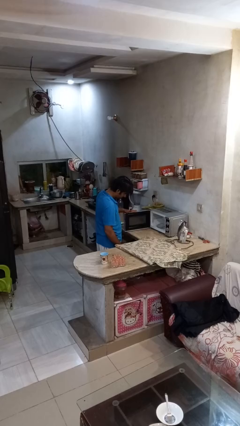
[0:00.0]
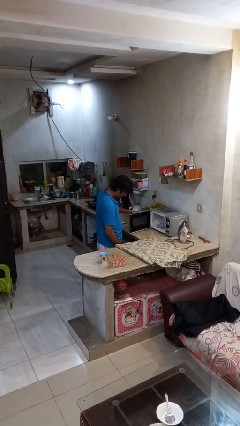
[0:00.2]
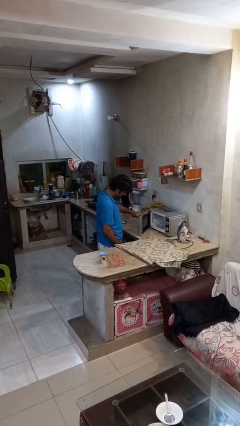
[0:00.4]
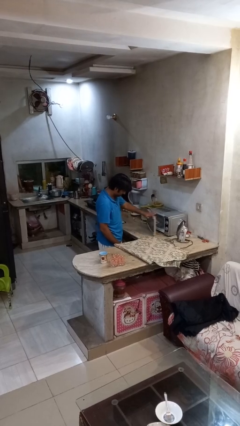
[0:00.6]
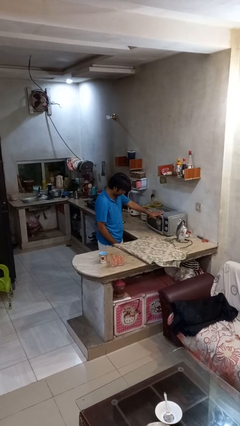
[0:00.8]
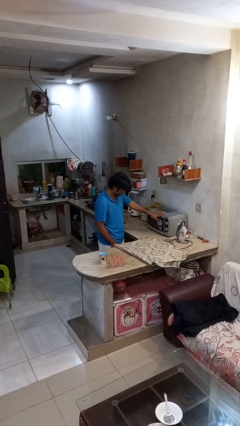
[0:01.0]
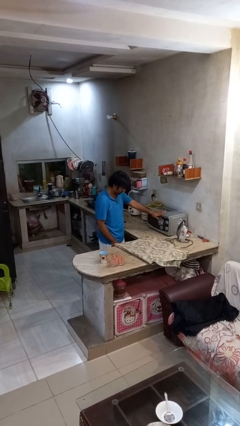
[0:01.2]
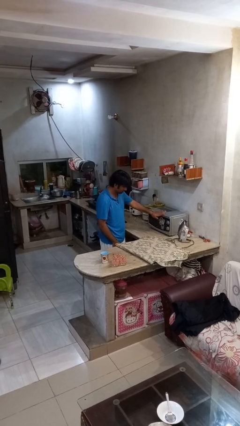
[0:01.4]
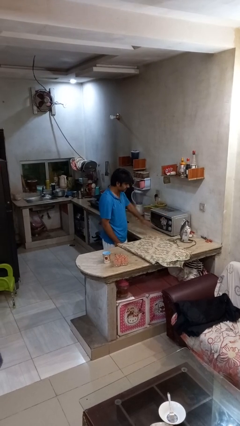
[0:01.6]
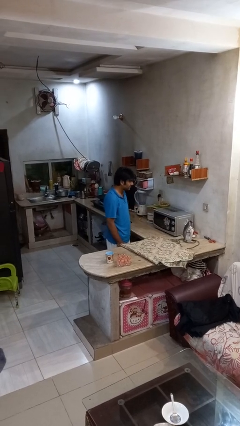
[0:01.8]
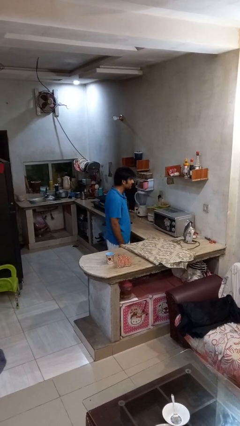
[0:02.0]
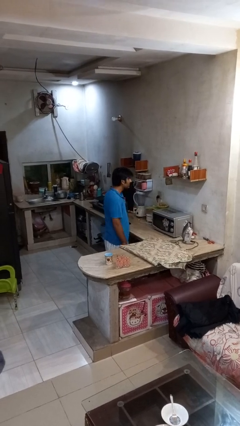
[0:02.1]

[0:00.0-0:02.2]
person closes microwave

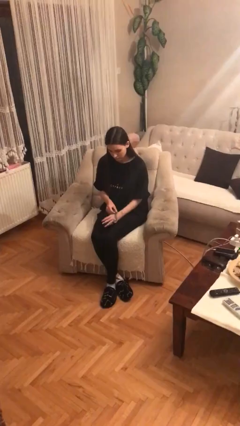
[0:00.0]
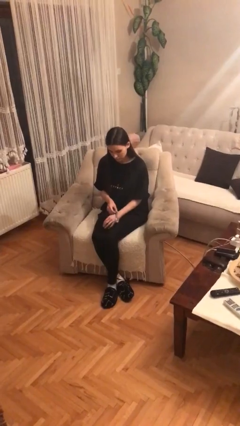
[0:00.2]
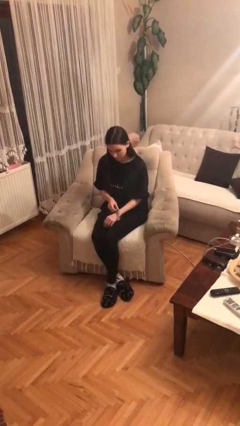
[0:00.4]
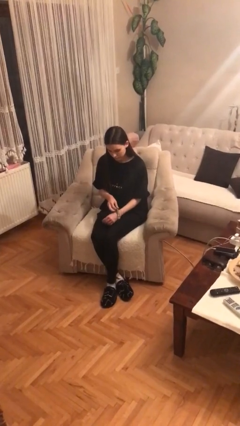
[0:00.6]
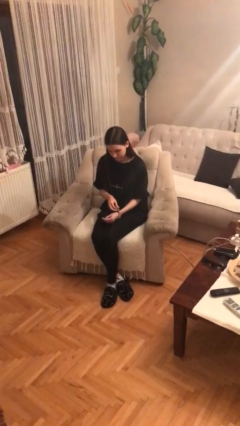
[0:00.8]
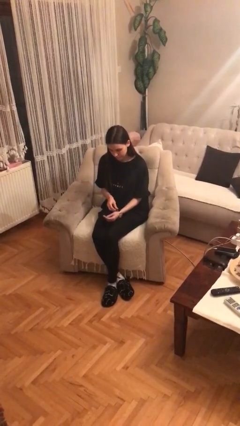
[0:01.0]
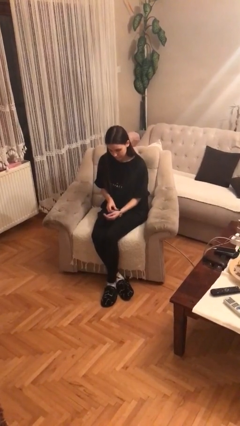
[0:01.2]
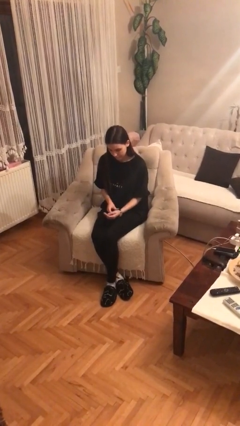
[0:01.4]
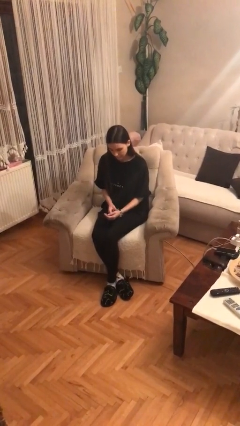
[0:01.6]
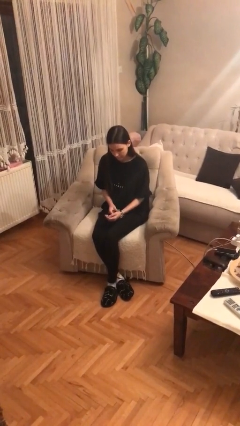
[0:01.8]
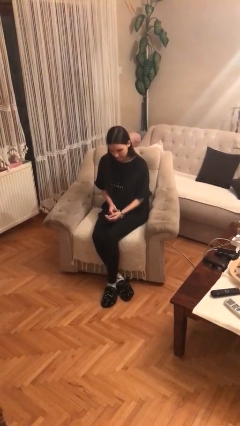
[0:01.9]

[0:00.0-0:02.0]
person puts on wristwatch

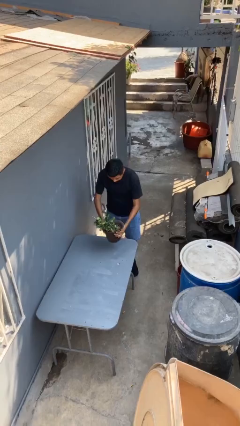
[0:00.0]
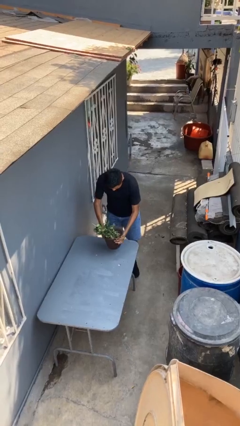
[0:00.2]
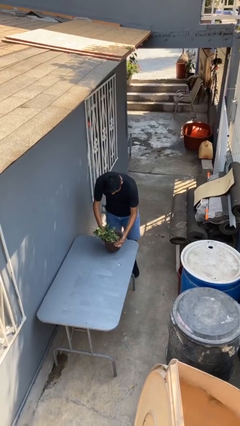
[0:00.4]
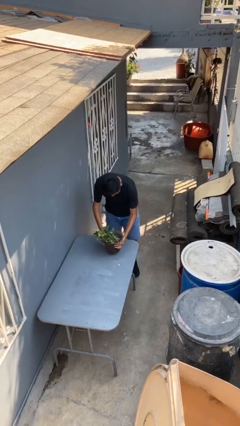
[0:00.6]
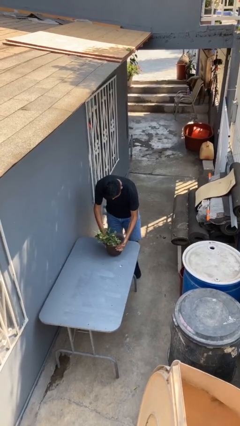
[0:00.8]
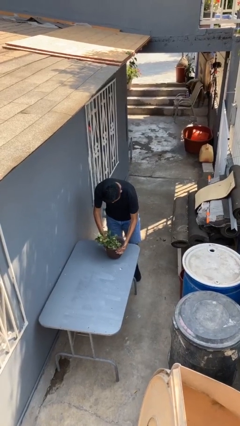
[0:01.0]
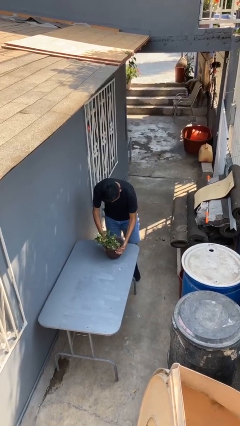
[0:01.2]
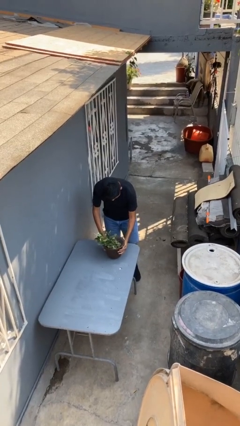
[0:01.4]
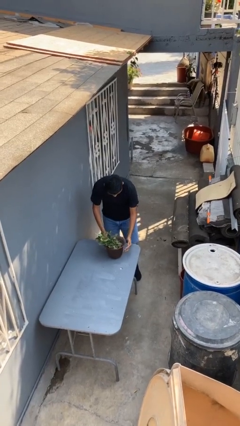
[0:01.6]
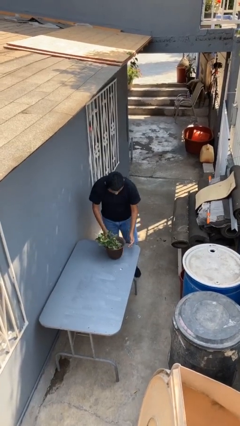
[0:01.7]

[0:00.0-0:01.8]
person puts down object on table

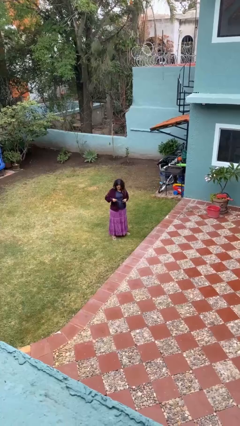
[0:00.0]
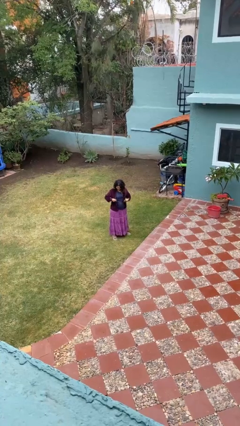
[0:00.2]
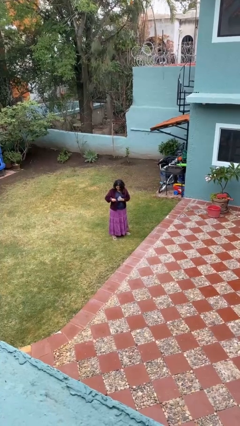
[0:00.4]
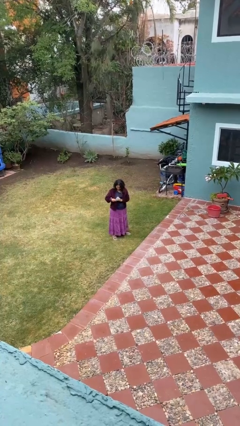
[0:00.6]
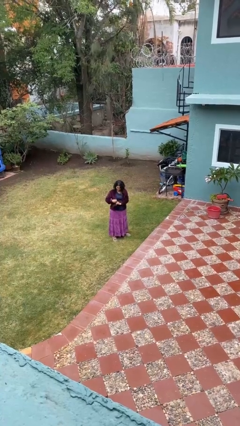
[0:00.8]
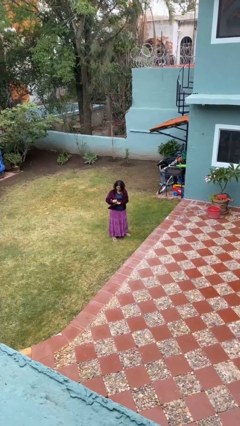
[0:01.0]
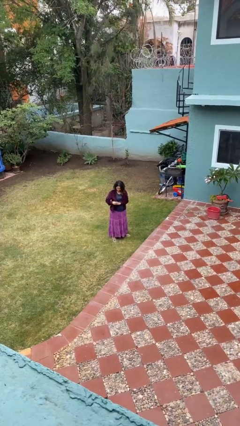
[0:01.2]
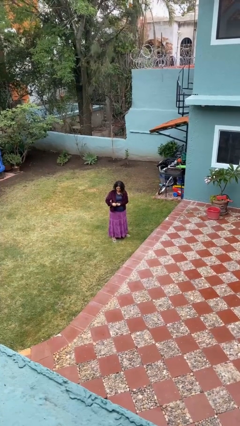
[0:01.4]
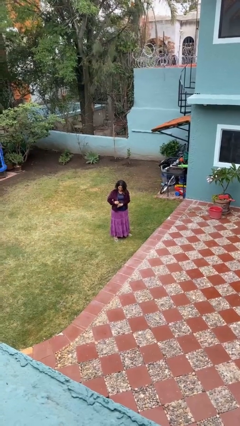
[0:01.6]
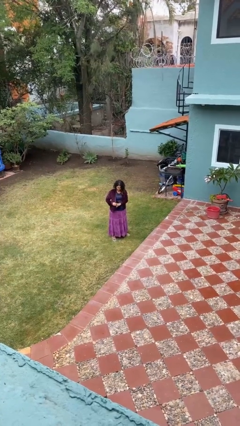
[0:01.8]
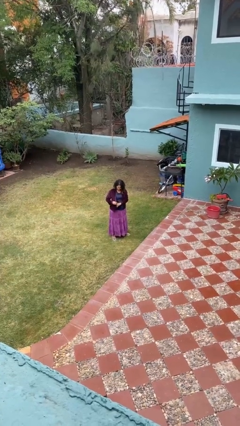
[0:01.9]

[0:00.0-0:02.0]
person puts phone into pocket

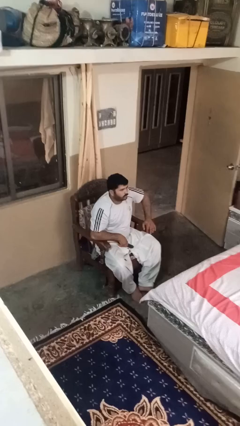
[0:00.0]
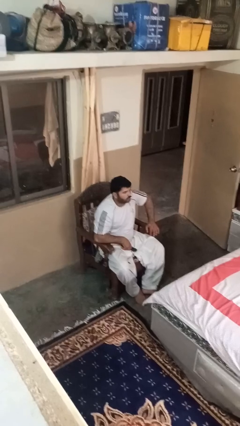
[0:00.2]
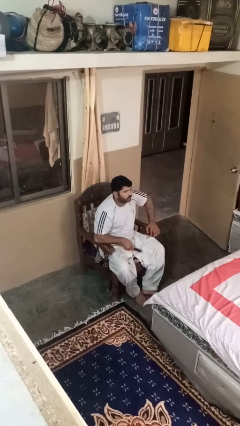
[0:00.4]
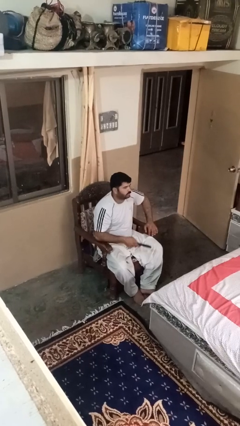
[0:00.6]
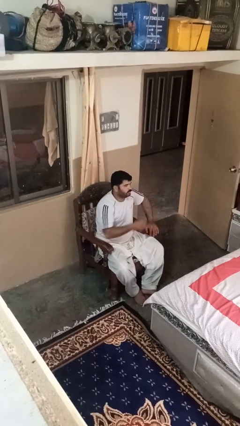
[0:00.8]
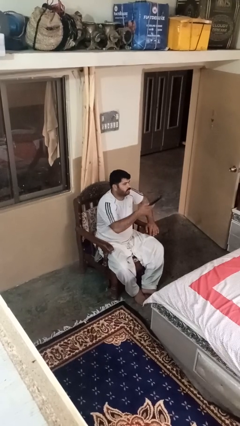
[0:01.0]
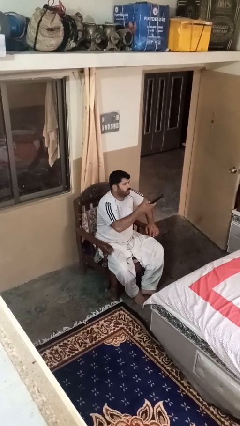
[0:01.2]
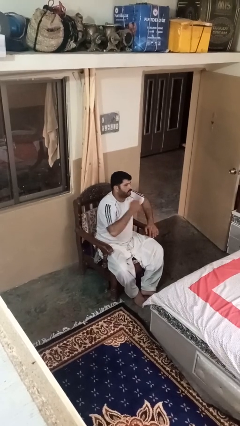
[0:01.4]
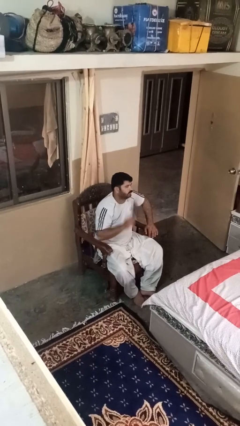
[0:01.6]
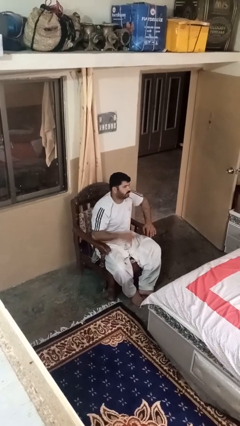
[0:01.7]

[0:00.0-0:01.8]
person uses television remote

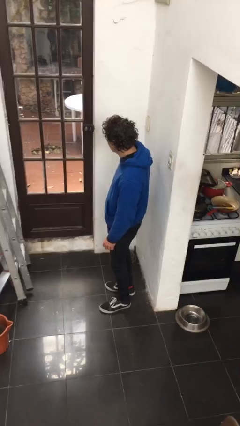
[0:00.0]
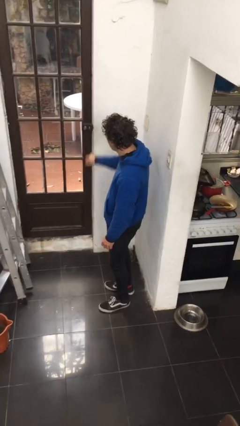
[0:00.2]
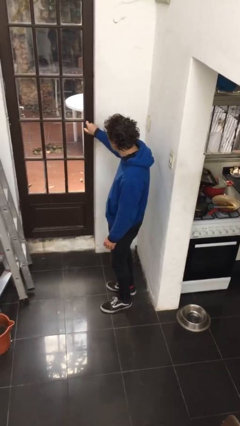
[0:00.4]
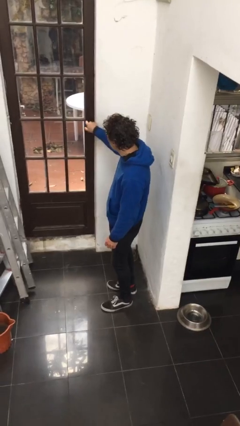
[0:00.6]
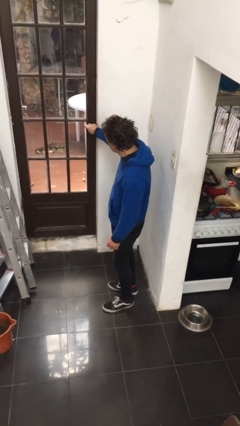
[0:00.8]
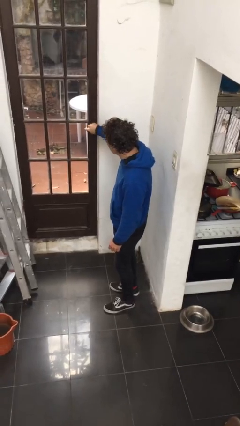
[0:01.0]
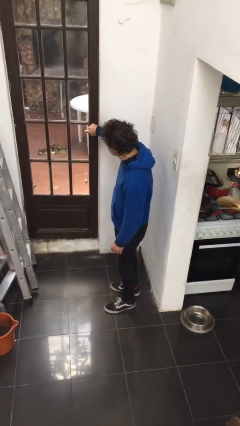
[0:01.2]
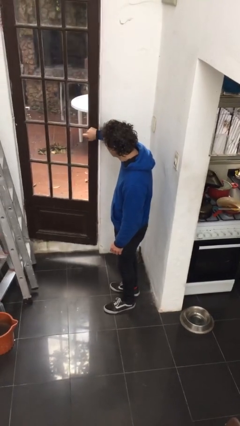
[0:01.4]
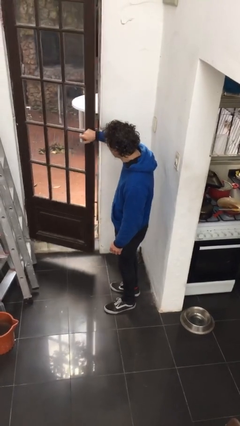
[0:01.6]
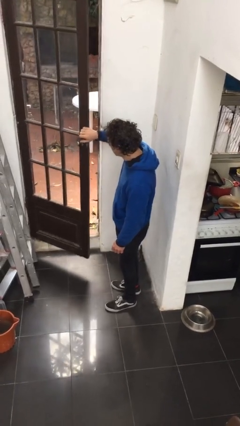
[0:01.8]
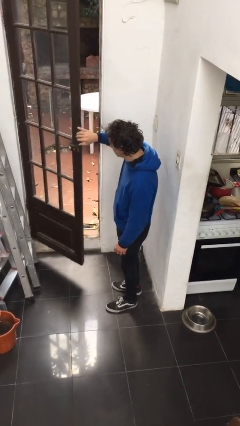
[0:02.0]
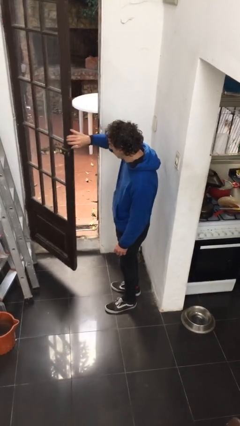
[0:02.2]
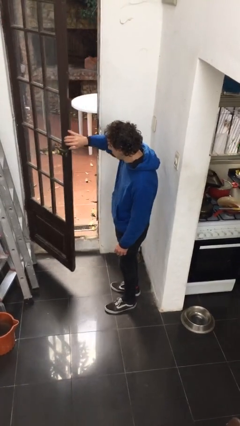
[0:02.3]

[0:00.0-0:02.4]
person opens facility door

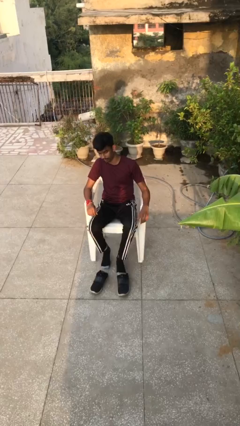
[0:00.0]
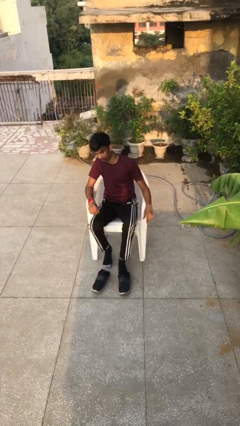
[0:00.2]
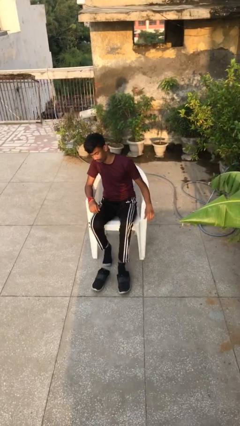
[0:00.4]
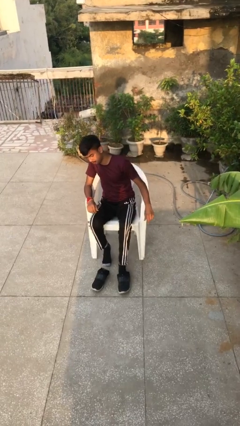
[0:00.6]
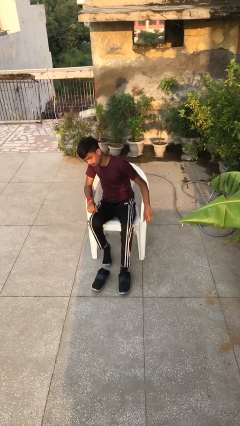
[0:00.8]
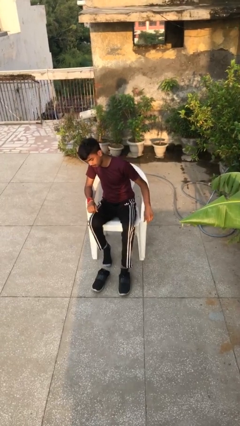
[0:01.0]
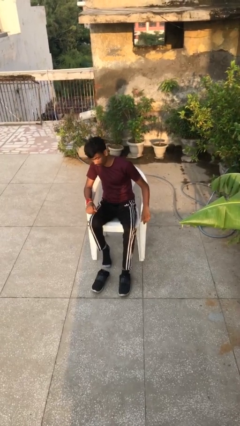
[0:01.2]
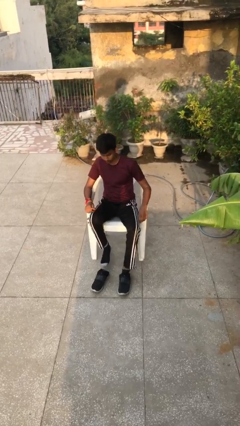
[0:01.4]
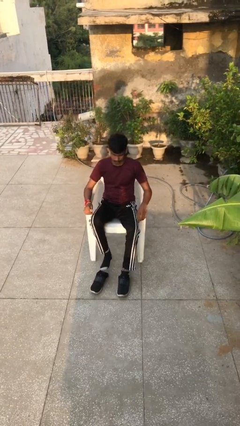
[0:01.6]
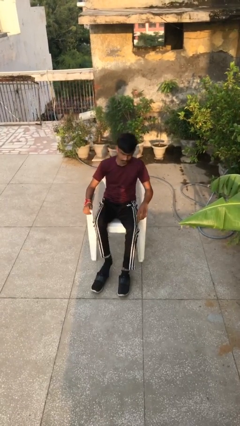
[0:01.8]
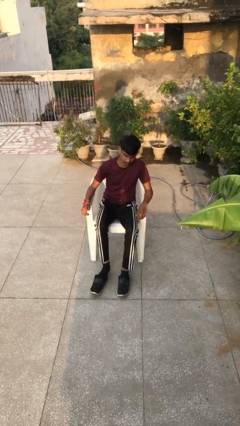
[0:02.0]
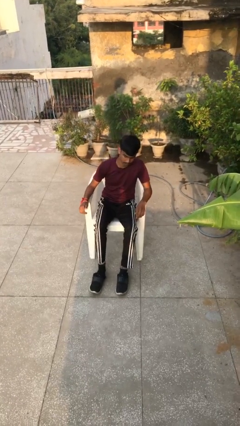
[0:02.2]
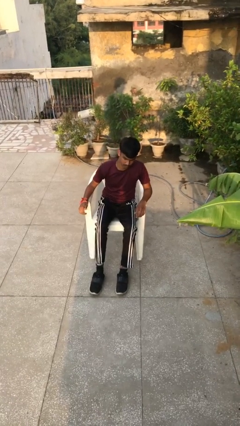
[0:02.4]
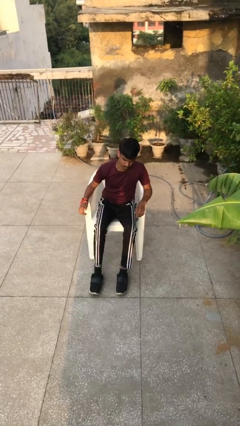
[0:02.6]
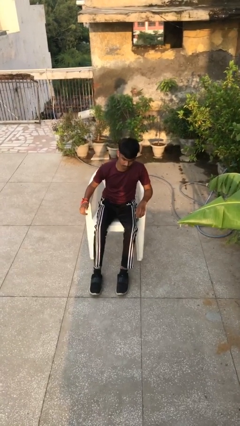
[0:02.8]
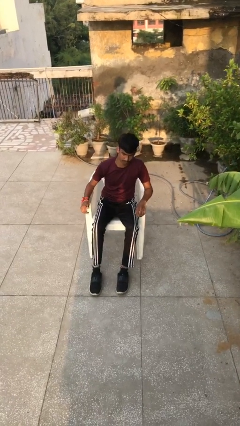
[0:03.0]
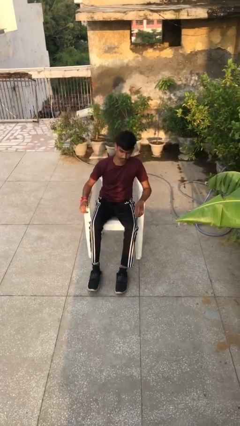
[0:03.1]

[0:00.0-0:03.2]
person puts on shoes

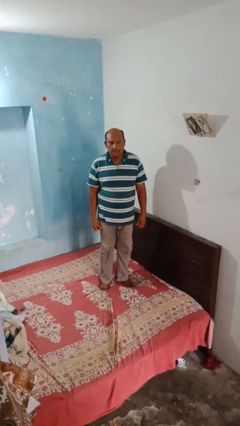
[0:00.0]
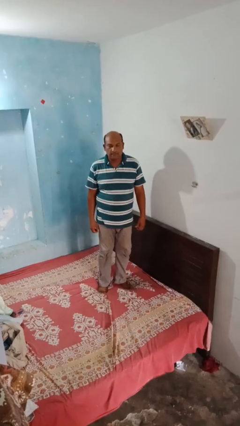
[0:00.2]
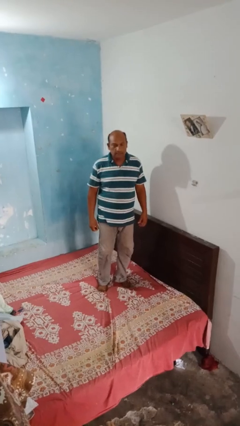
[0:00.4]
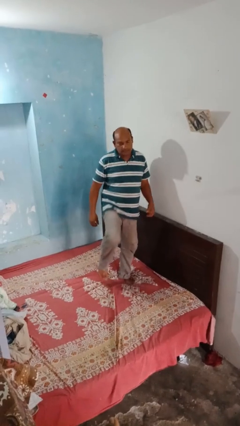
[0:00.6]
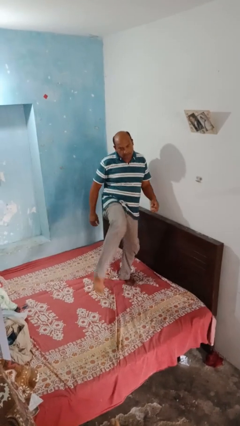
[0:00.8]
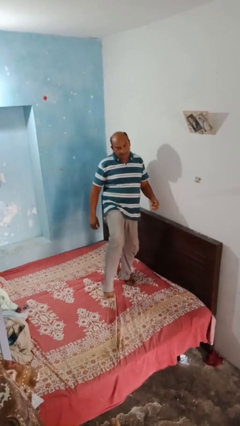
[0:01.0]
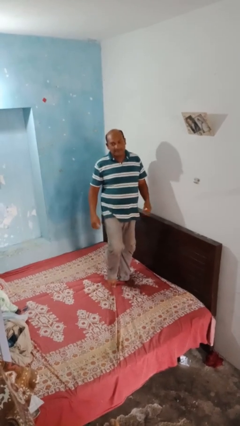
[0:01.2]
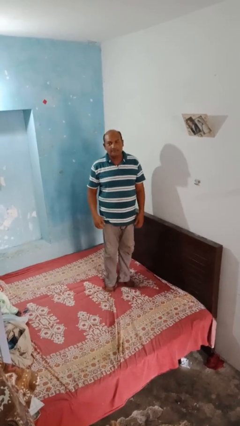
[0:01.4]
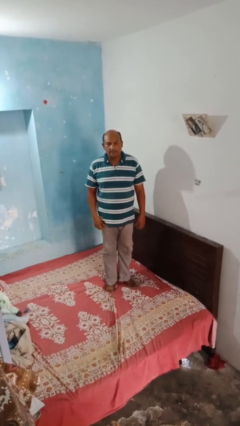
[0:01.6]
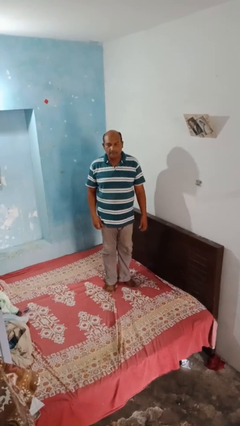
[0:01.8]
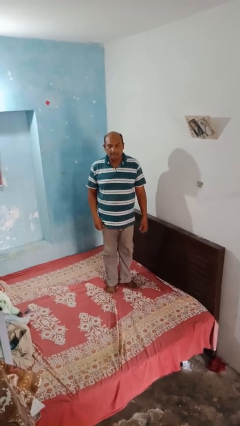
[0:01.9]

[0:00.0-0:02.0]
person karate kicks
